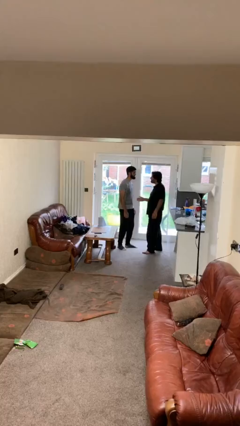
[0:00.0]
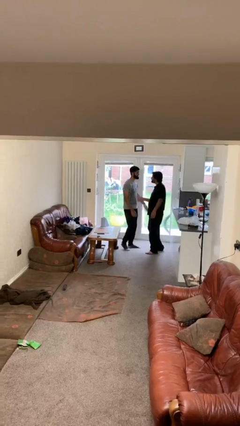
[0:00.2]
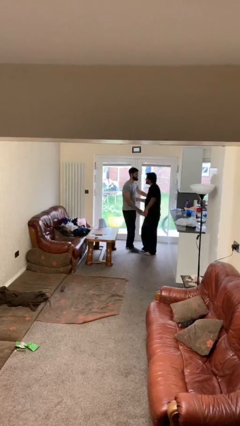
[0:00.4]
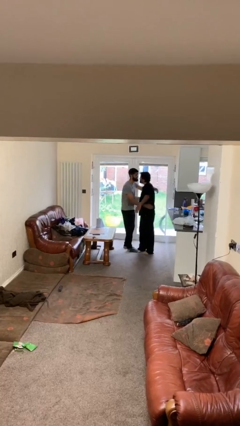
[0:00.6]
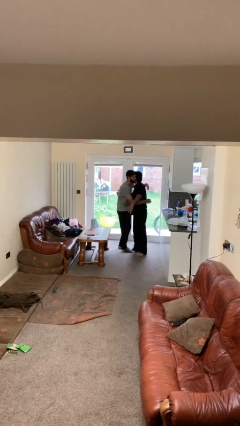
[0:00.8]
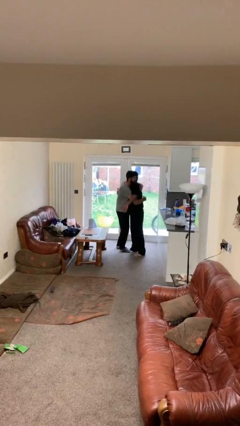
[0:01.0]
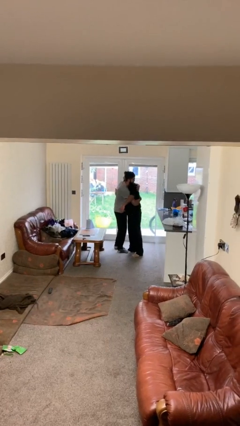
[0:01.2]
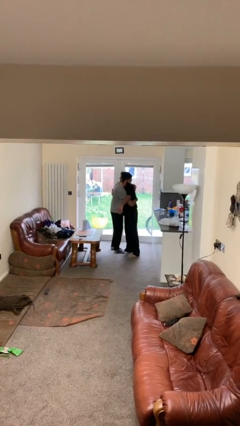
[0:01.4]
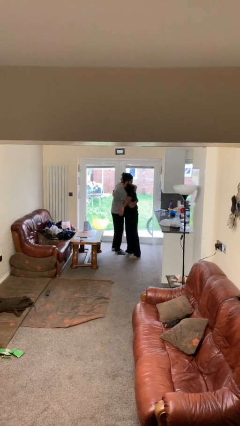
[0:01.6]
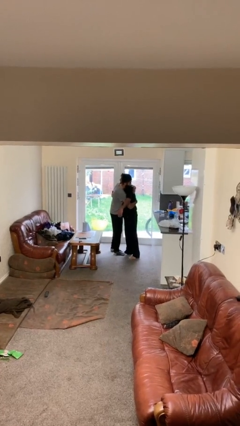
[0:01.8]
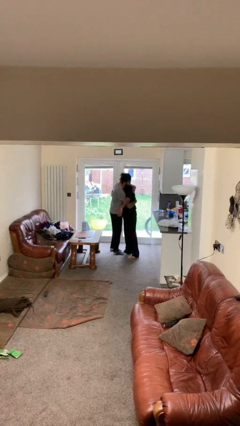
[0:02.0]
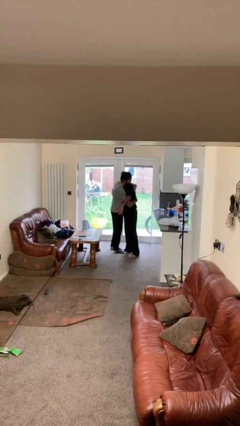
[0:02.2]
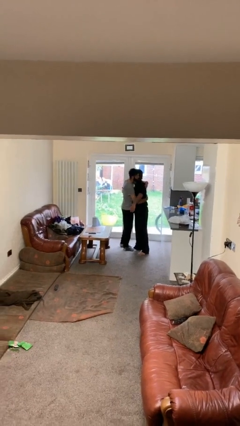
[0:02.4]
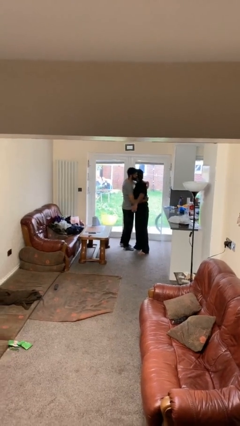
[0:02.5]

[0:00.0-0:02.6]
person embraces person

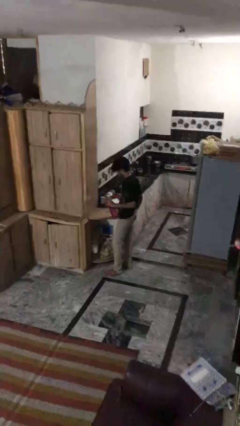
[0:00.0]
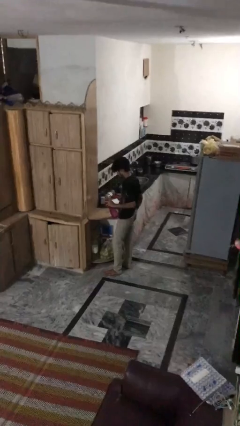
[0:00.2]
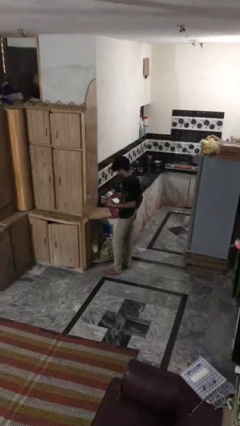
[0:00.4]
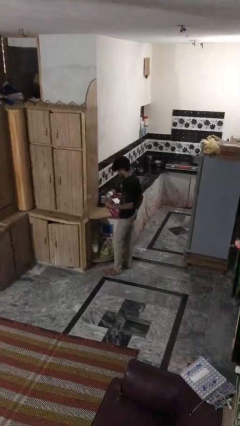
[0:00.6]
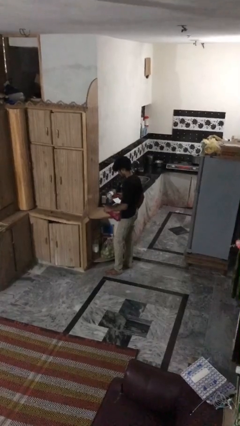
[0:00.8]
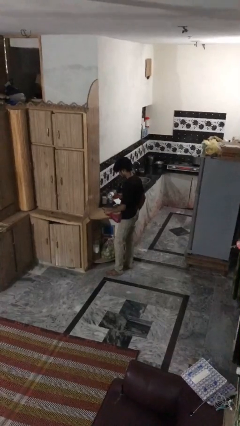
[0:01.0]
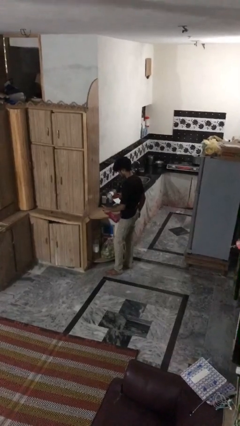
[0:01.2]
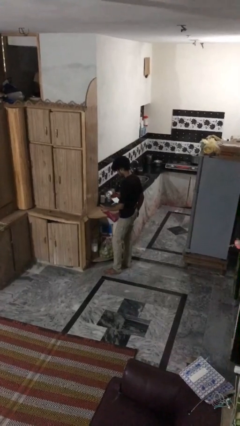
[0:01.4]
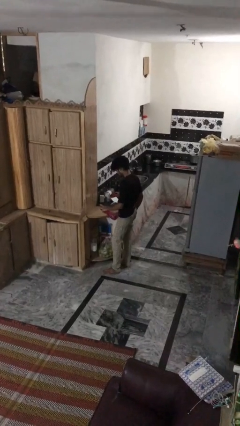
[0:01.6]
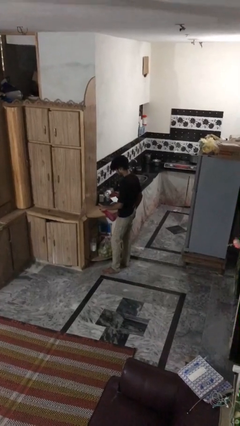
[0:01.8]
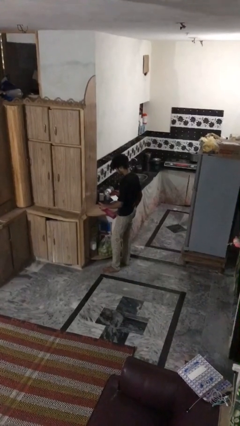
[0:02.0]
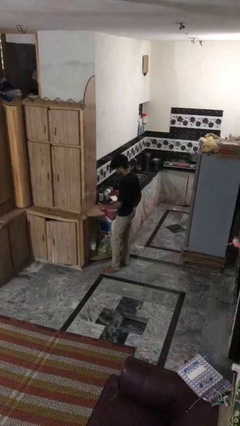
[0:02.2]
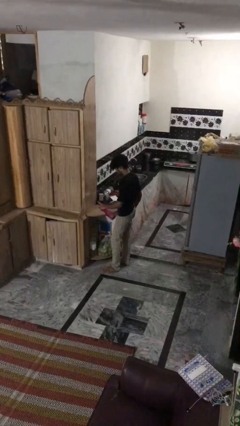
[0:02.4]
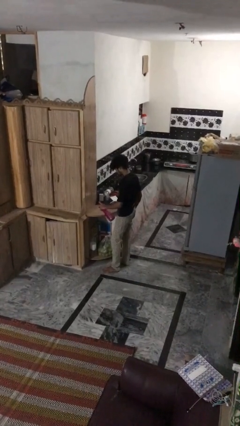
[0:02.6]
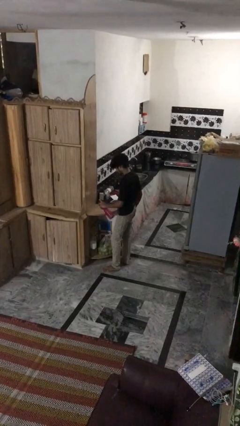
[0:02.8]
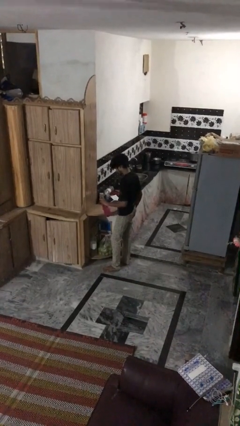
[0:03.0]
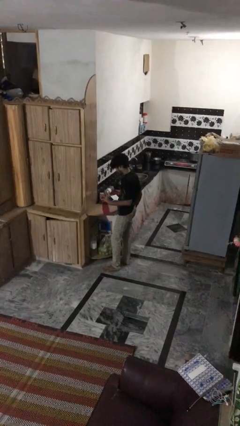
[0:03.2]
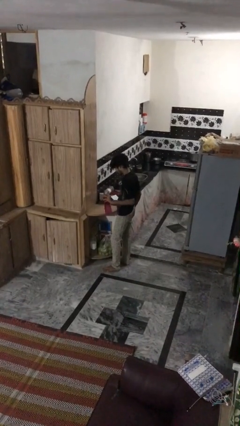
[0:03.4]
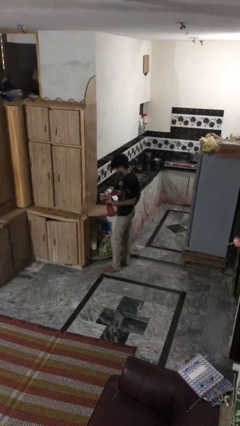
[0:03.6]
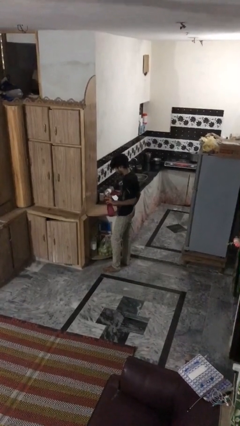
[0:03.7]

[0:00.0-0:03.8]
person sprays from bottle

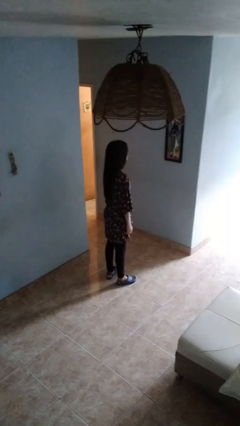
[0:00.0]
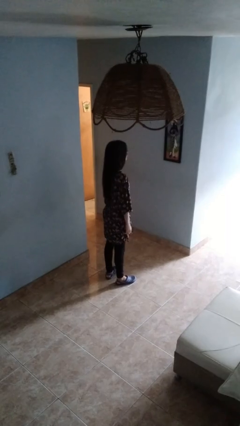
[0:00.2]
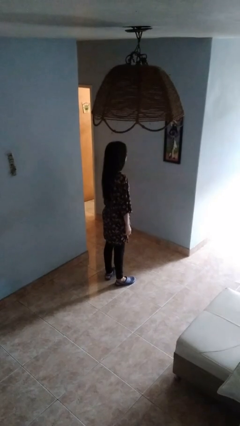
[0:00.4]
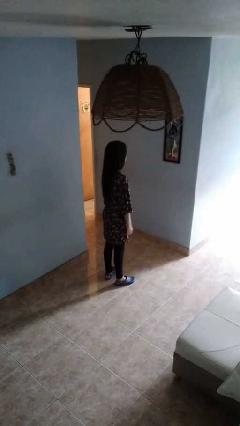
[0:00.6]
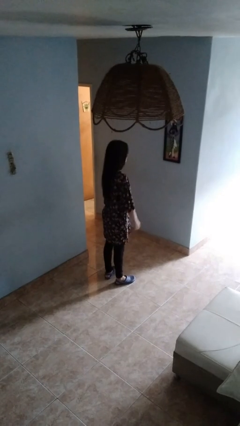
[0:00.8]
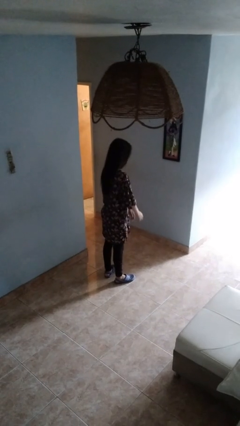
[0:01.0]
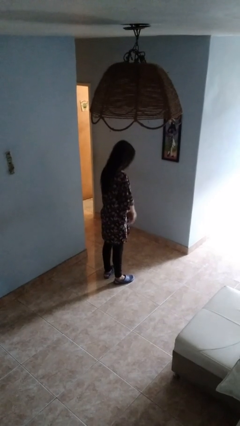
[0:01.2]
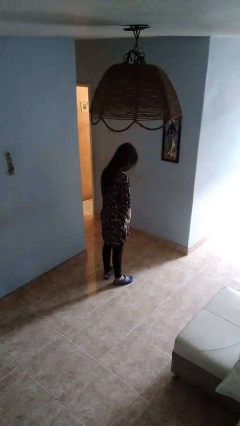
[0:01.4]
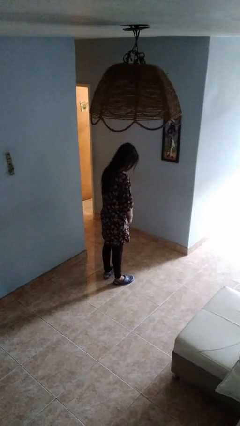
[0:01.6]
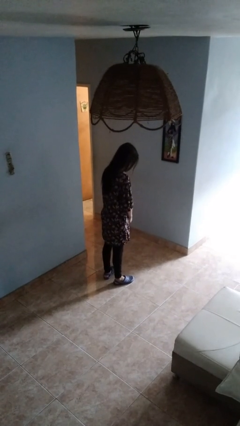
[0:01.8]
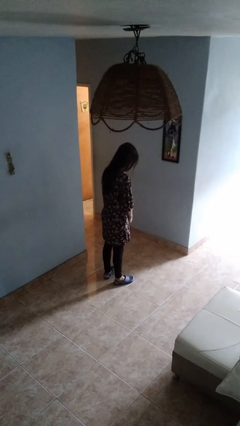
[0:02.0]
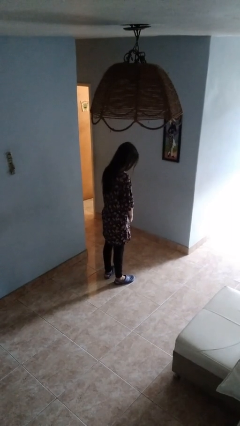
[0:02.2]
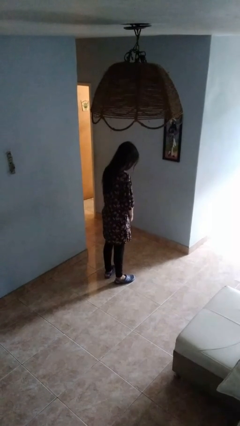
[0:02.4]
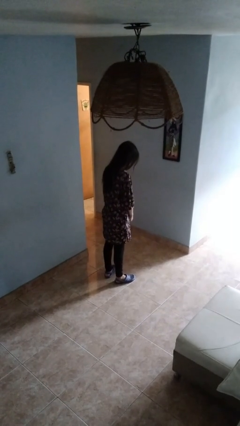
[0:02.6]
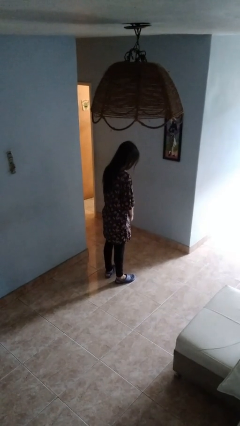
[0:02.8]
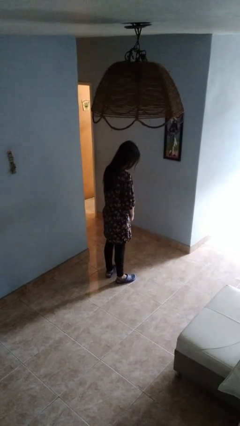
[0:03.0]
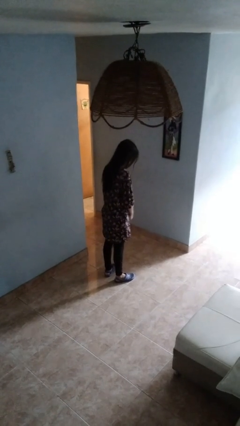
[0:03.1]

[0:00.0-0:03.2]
person prays

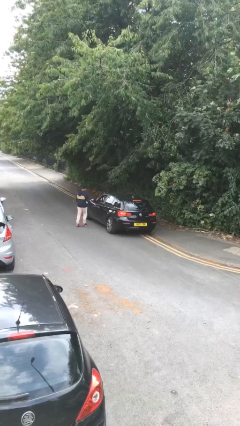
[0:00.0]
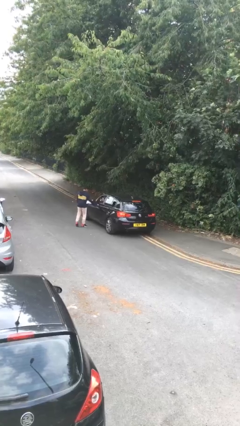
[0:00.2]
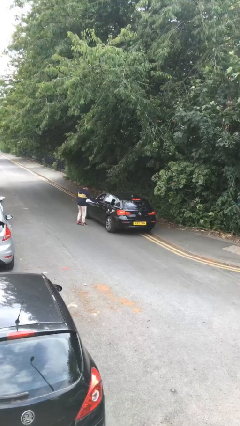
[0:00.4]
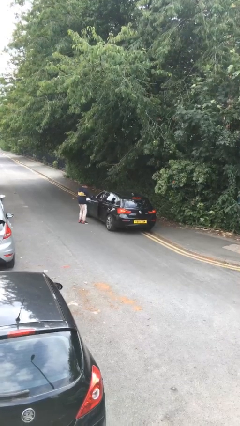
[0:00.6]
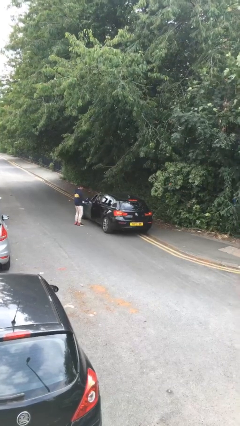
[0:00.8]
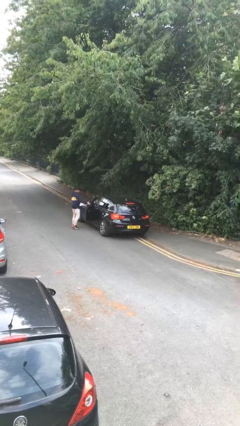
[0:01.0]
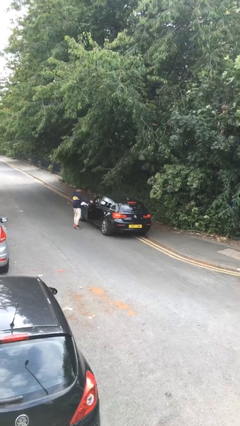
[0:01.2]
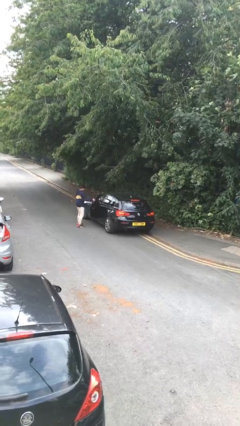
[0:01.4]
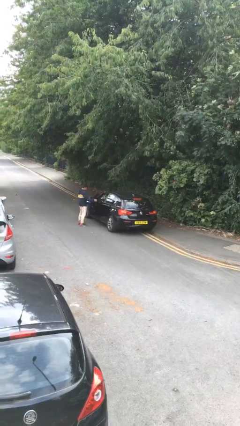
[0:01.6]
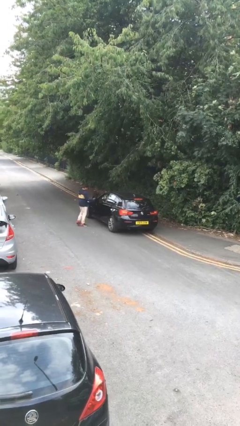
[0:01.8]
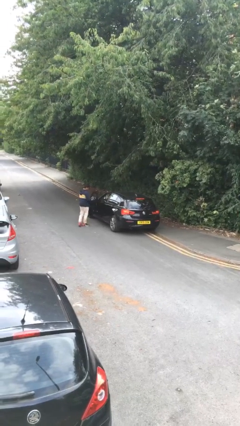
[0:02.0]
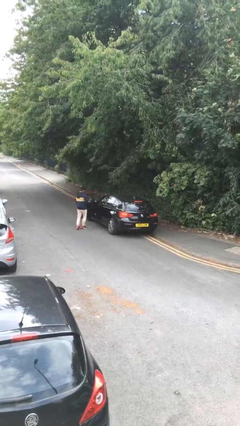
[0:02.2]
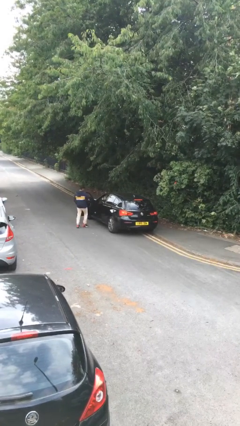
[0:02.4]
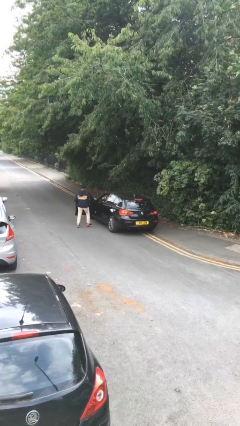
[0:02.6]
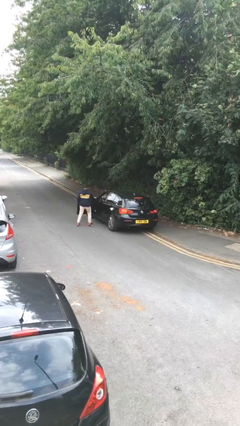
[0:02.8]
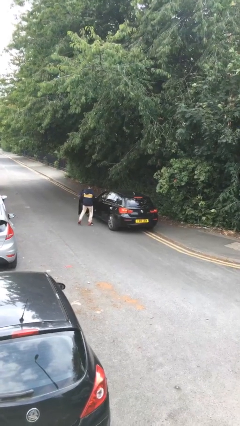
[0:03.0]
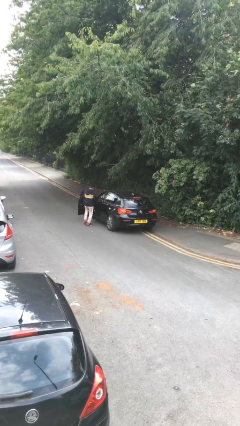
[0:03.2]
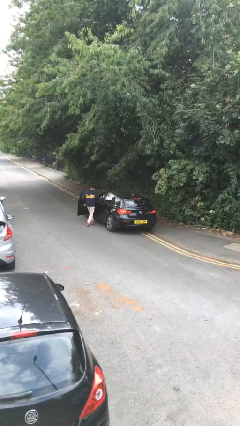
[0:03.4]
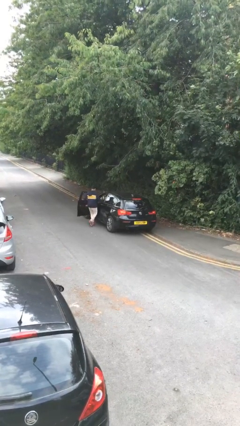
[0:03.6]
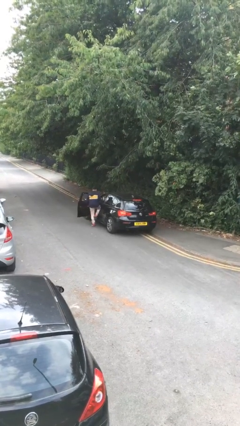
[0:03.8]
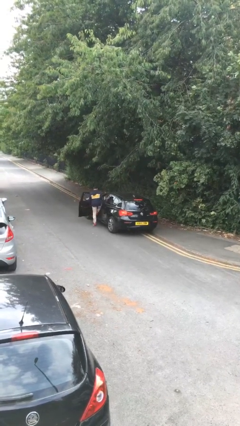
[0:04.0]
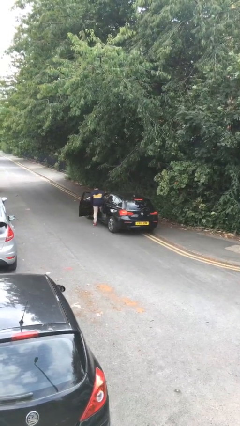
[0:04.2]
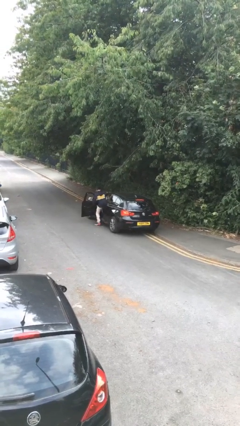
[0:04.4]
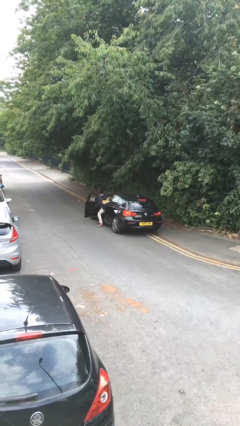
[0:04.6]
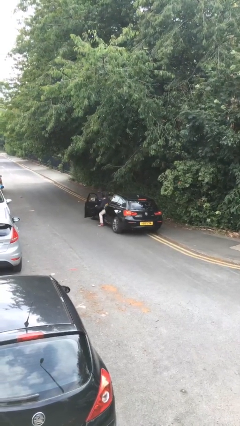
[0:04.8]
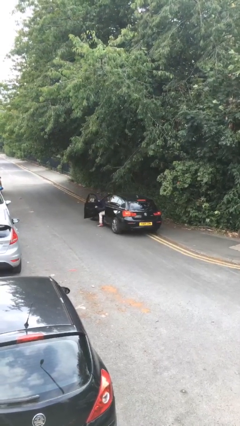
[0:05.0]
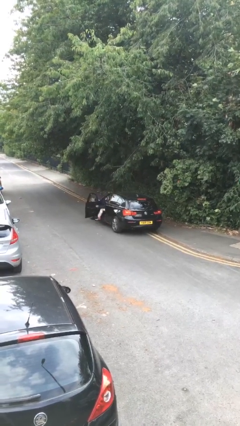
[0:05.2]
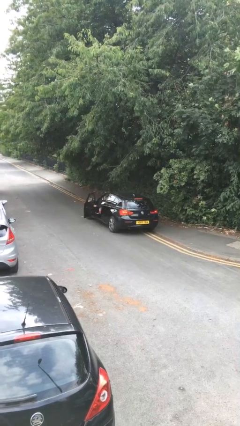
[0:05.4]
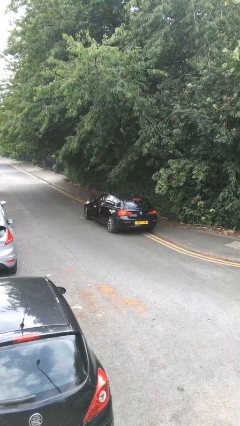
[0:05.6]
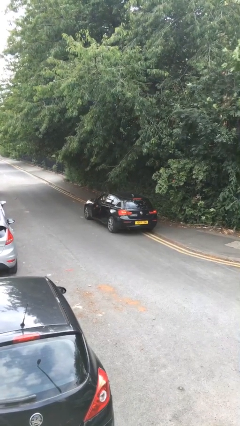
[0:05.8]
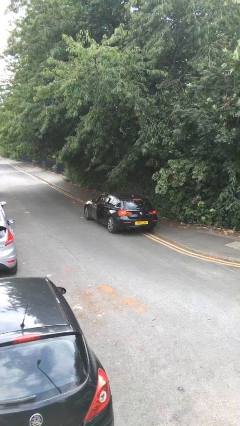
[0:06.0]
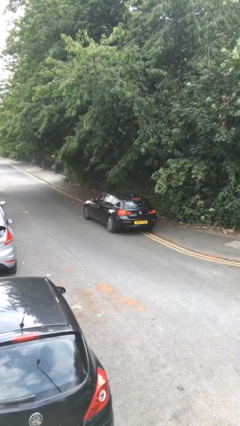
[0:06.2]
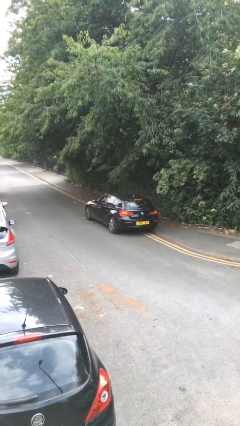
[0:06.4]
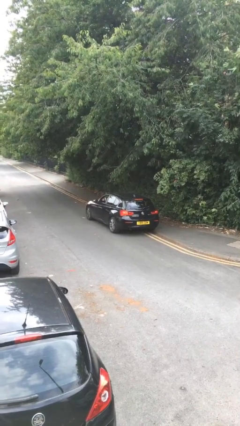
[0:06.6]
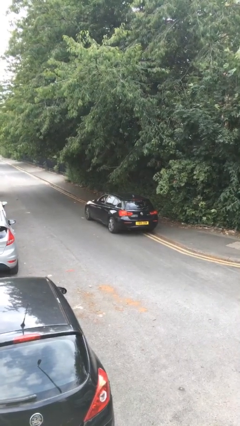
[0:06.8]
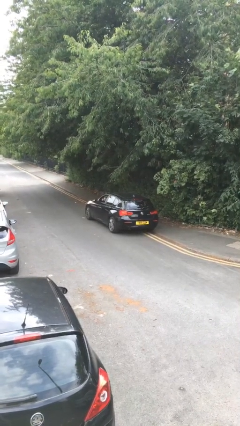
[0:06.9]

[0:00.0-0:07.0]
car picks up person

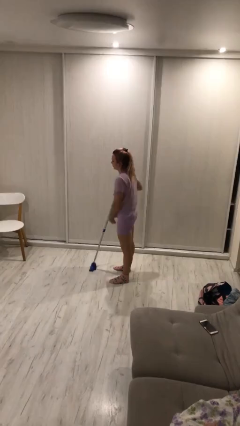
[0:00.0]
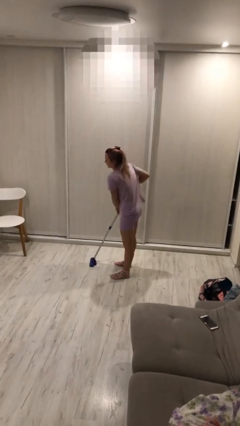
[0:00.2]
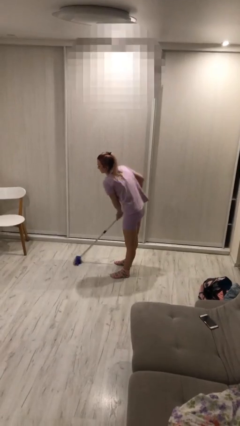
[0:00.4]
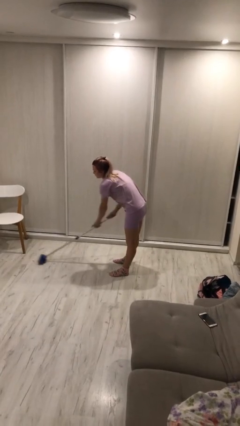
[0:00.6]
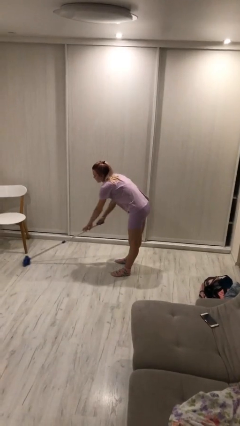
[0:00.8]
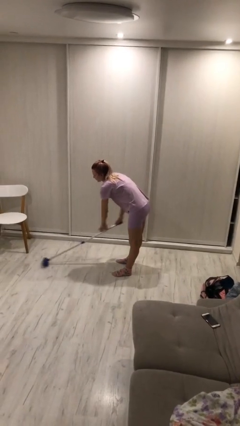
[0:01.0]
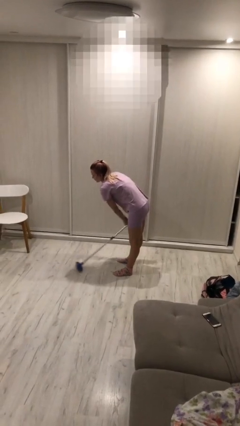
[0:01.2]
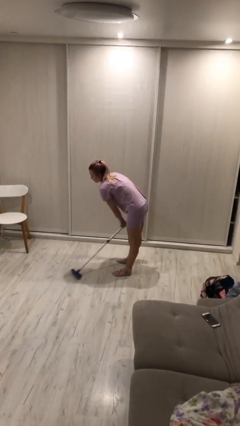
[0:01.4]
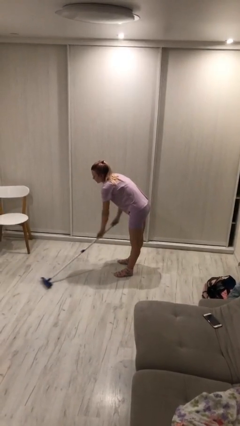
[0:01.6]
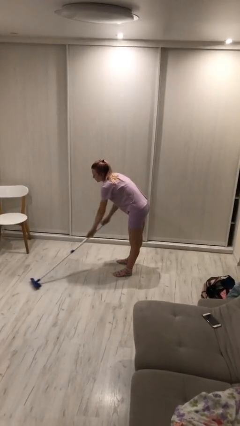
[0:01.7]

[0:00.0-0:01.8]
person mops
